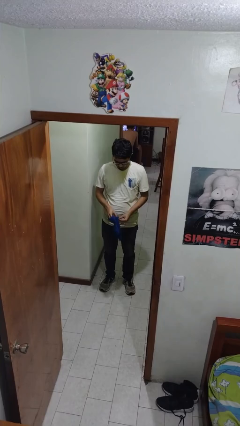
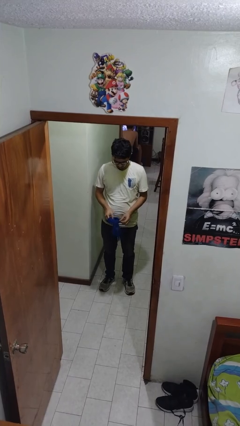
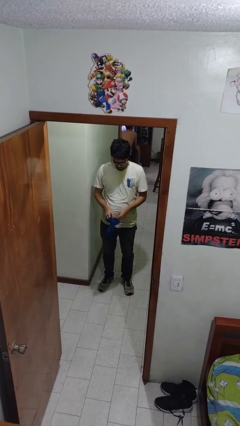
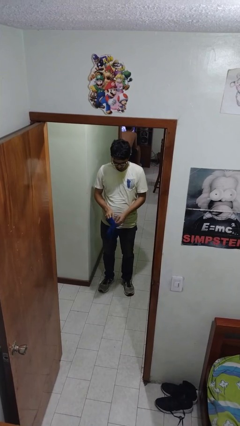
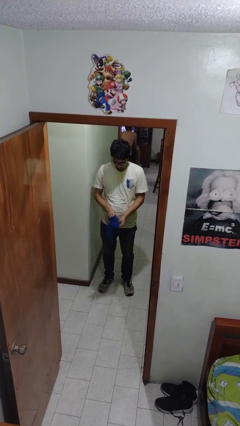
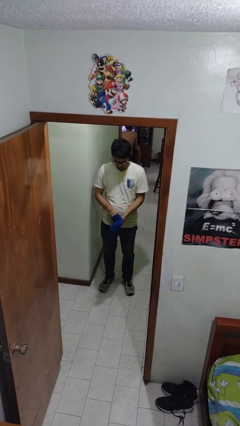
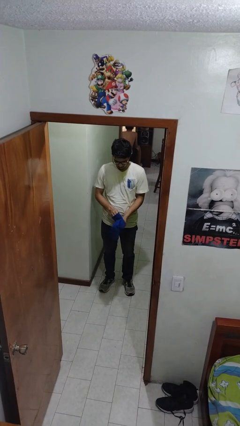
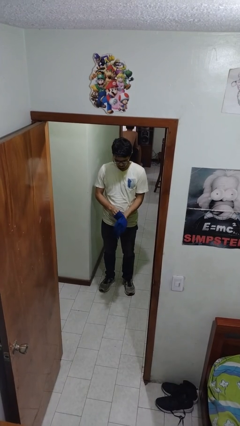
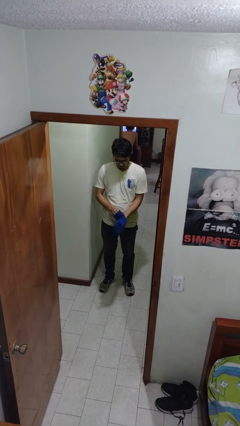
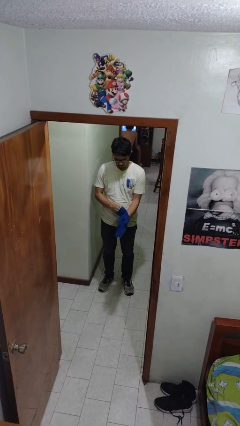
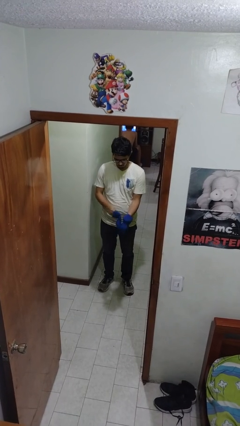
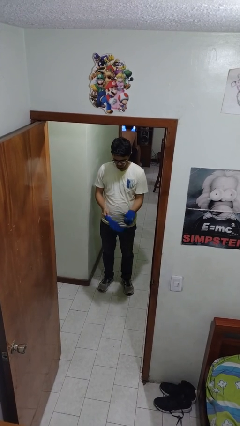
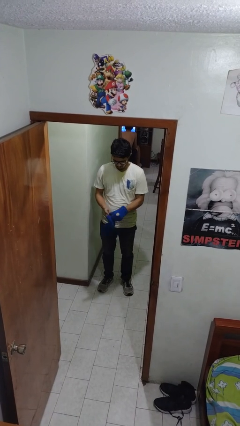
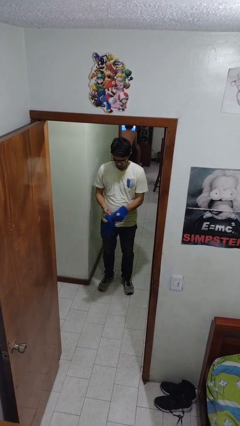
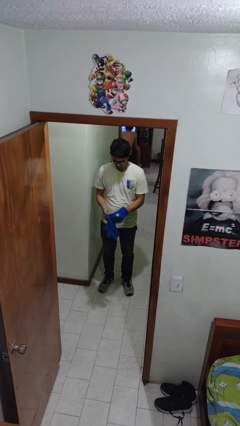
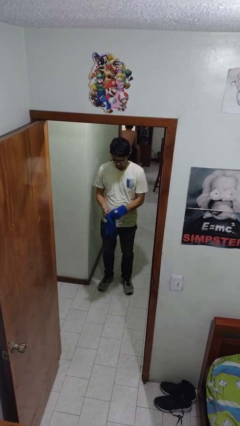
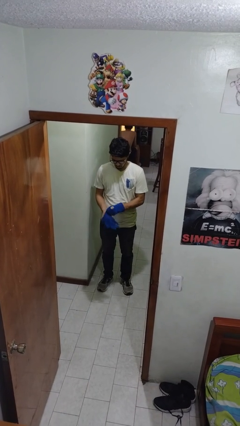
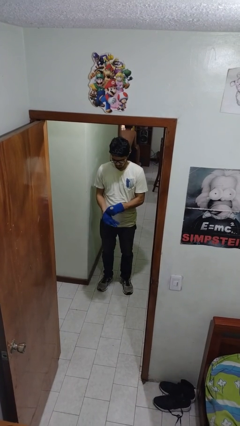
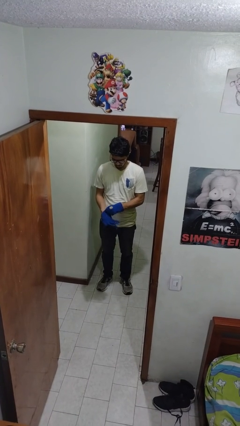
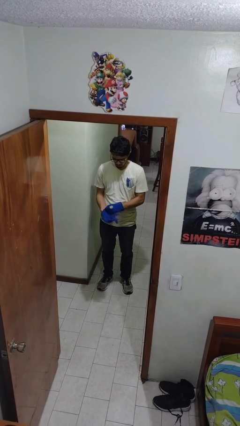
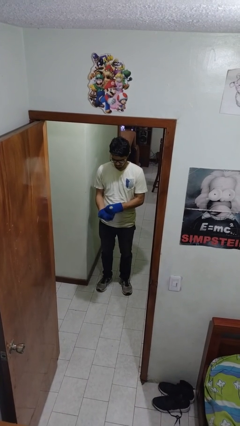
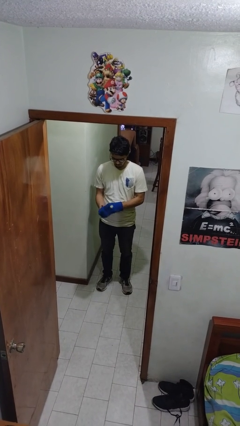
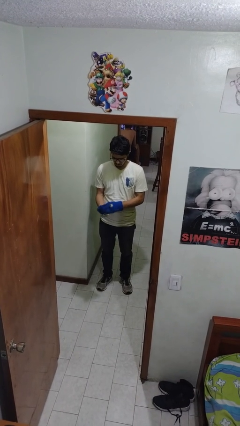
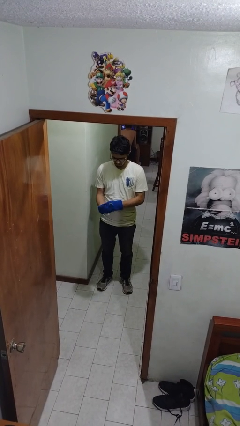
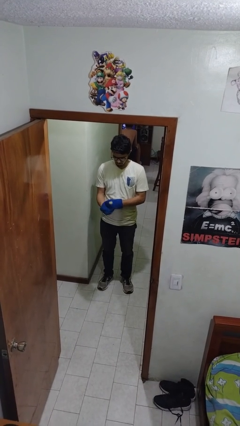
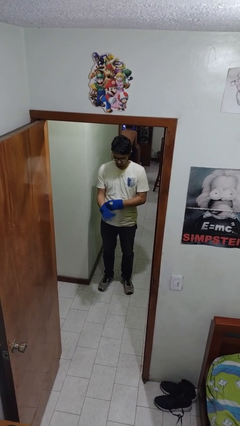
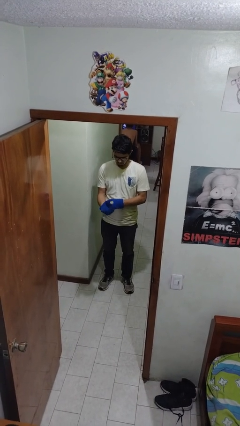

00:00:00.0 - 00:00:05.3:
person puts on gloves

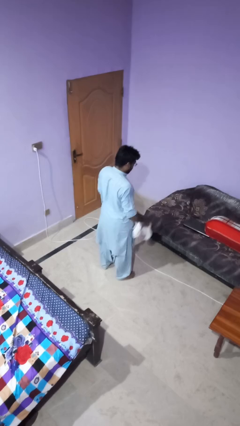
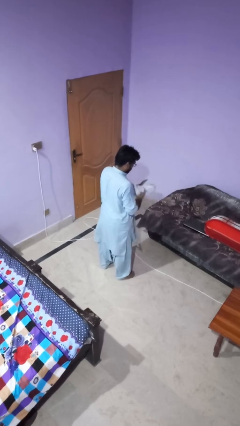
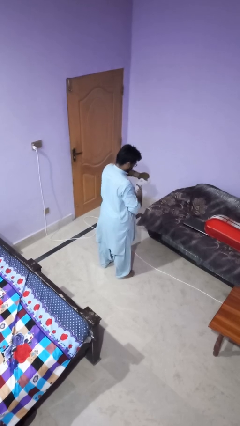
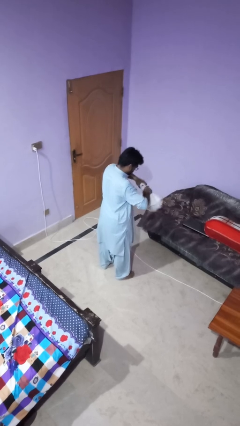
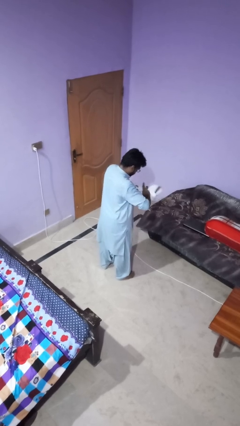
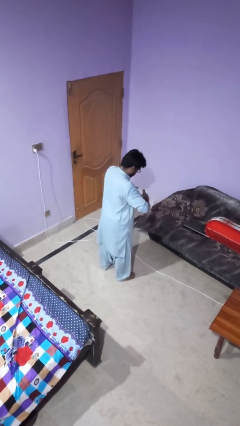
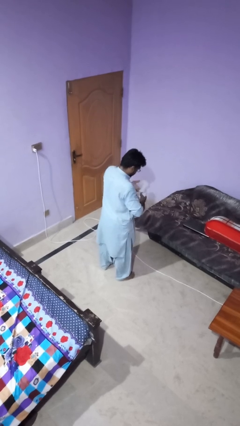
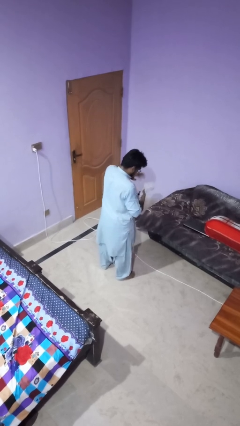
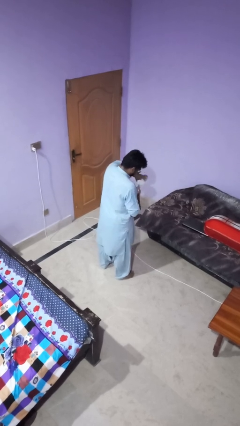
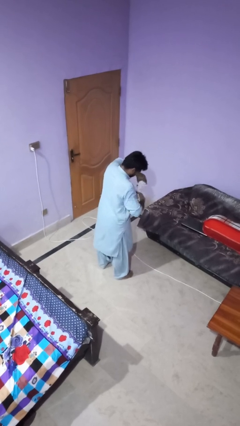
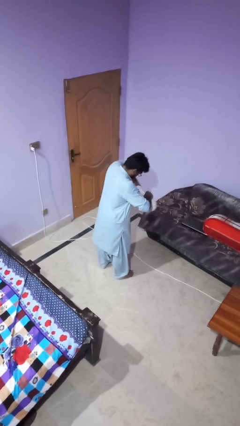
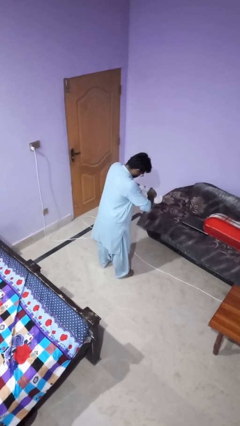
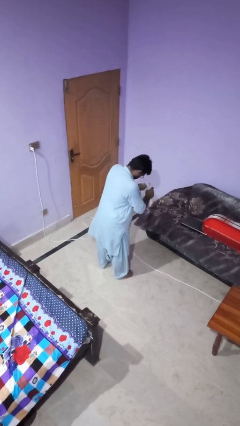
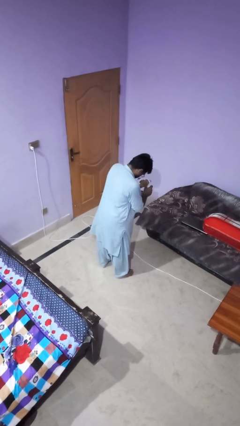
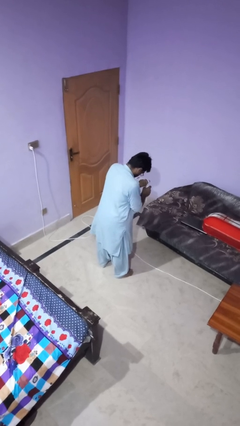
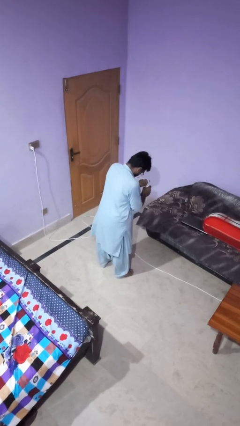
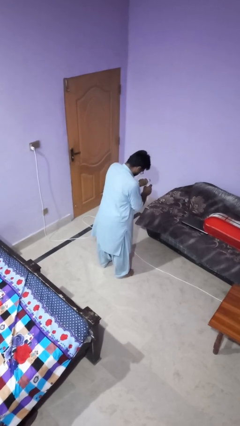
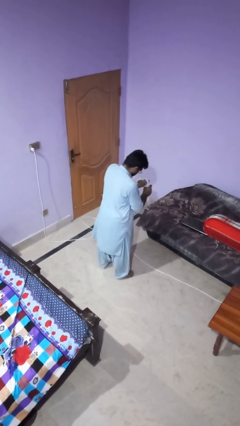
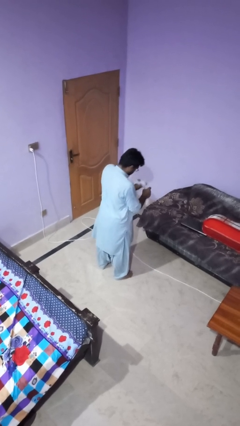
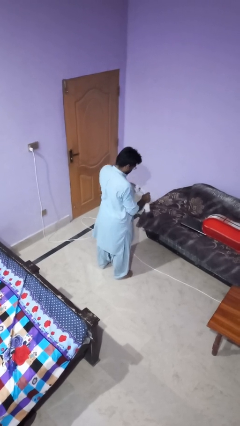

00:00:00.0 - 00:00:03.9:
person squeezes object

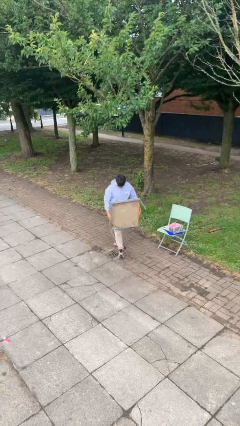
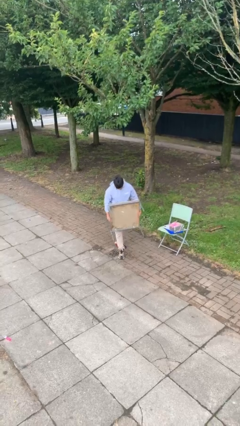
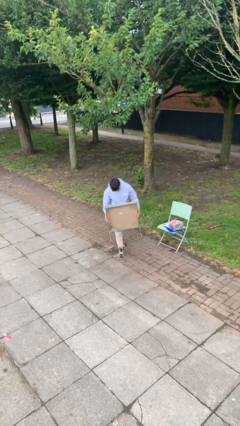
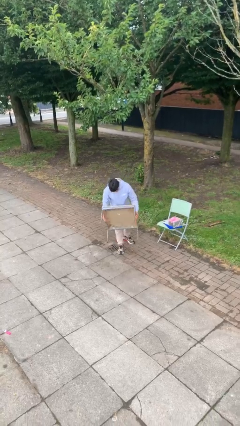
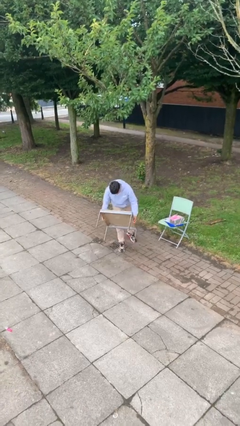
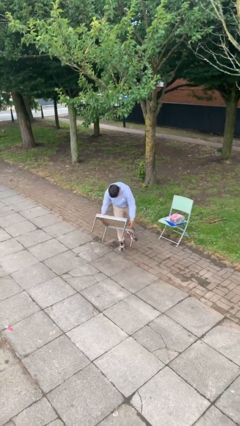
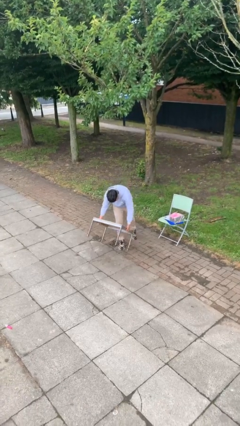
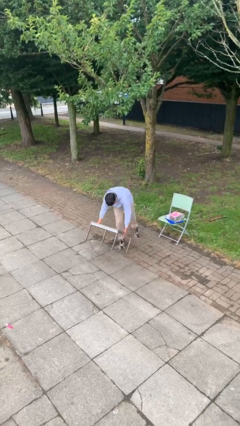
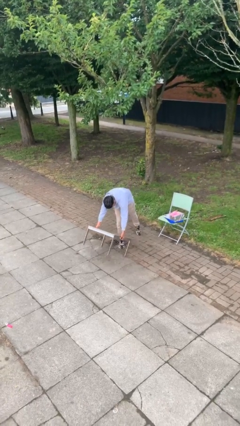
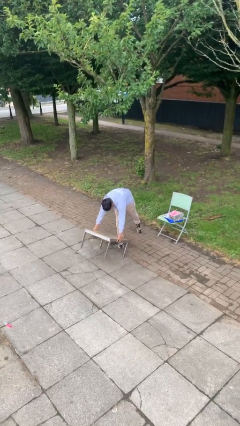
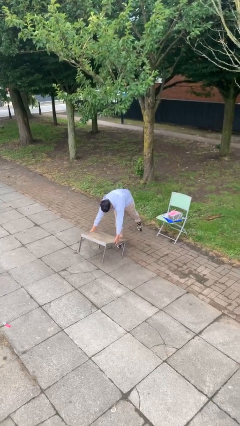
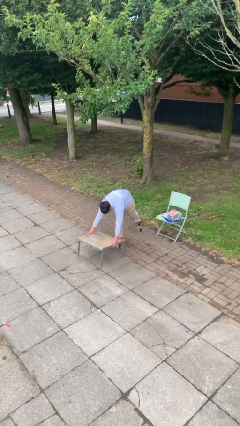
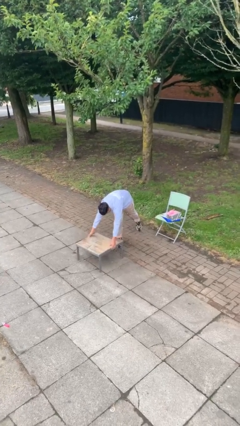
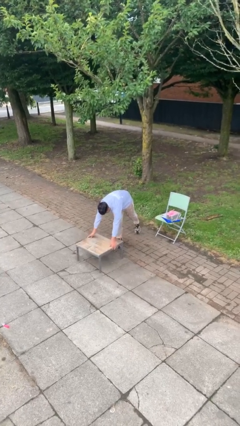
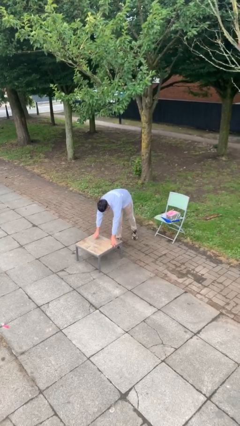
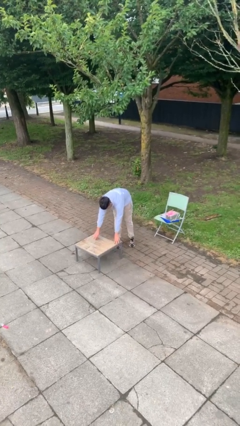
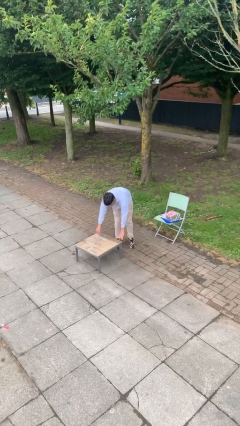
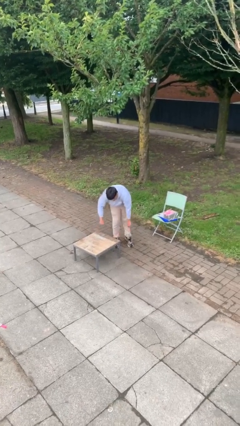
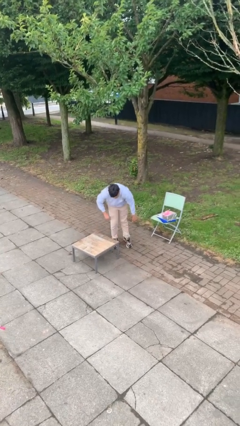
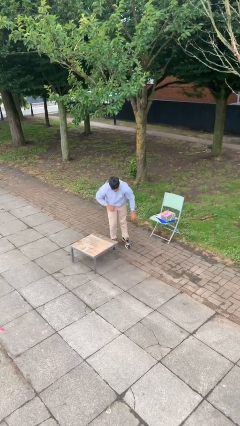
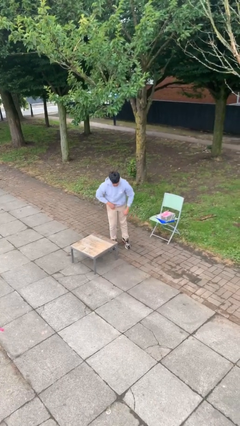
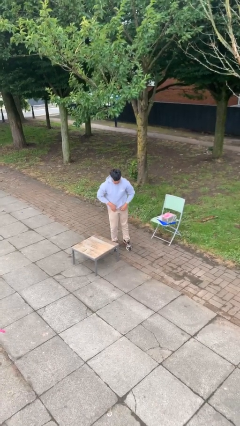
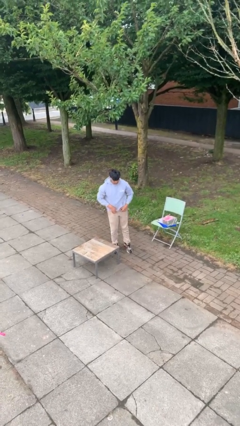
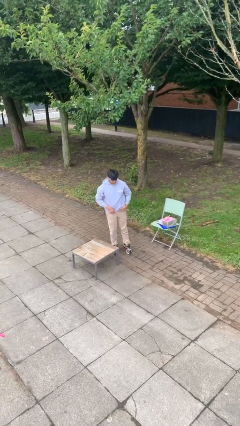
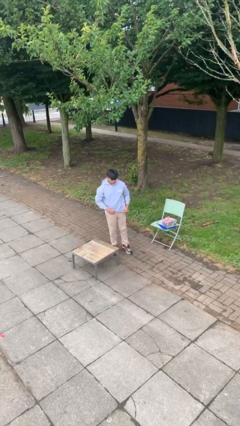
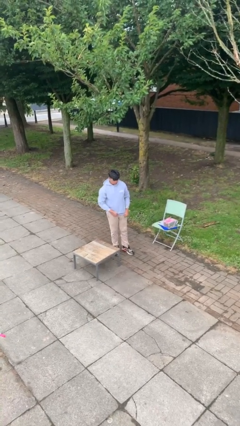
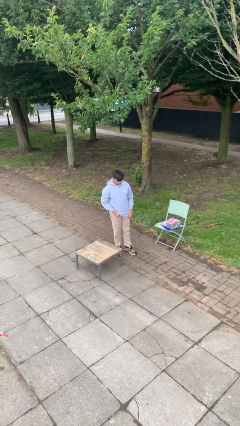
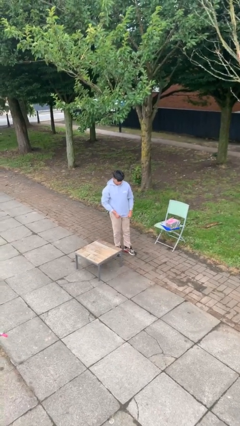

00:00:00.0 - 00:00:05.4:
person puts down object on floor

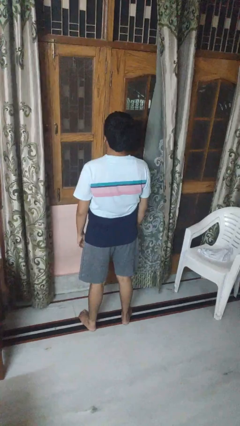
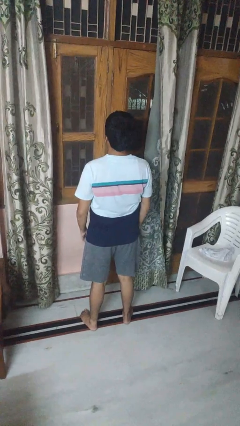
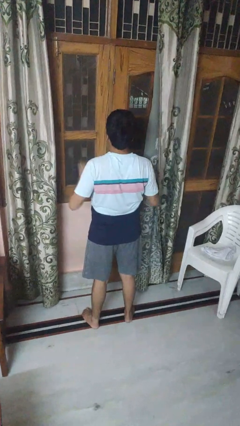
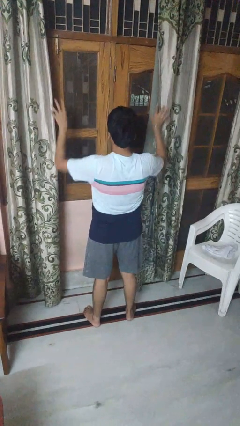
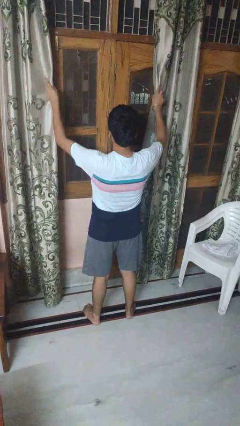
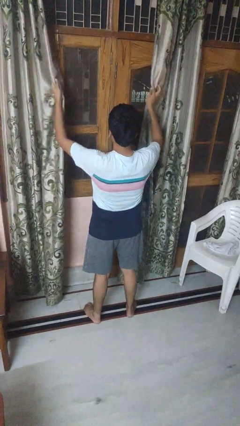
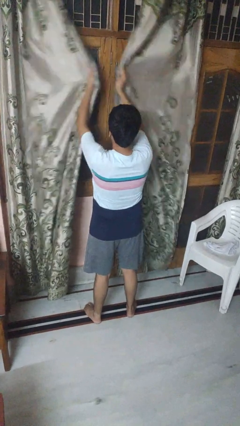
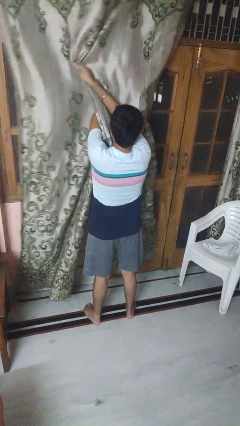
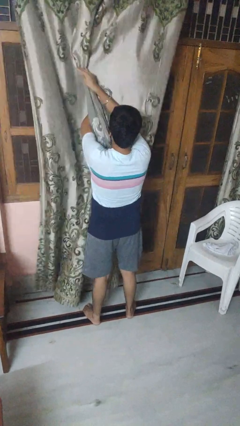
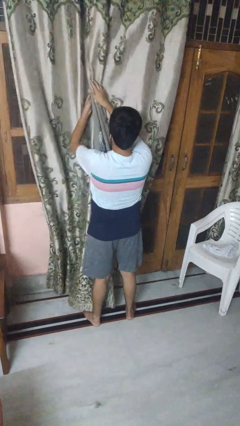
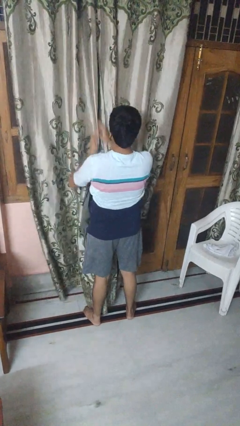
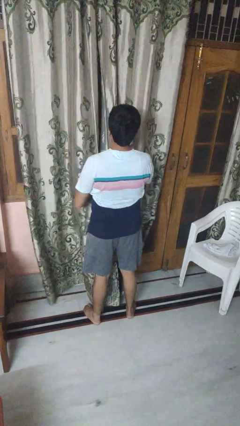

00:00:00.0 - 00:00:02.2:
person closes curtains

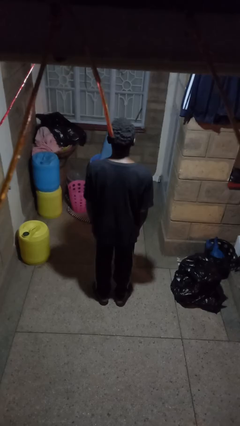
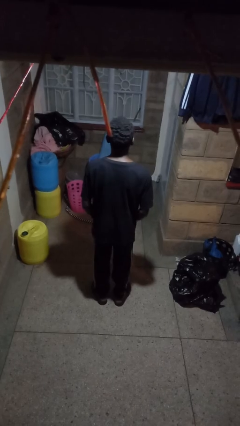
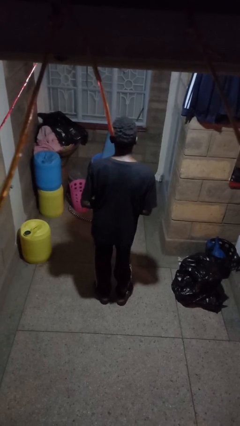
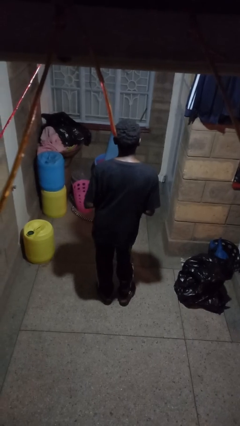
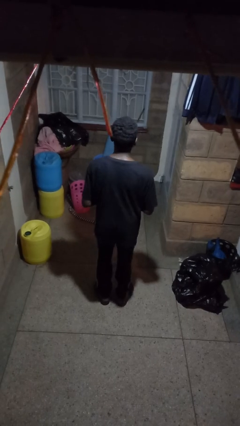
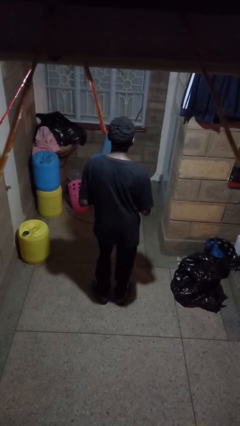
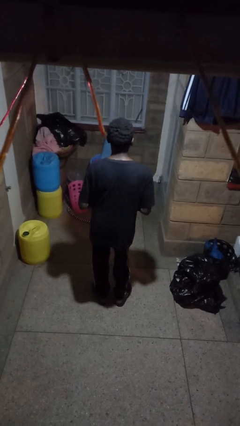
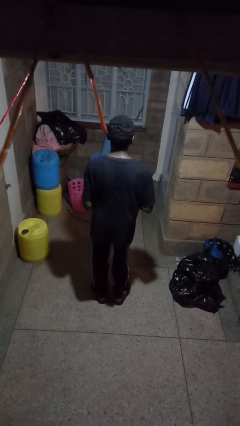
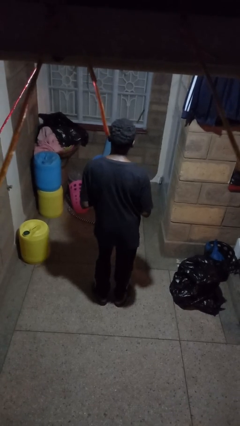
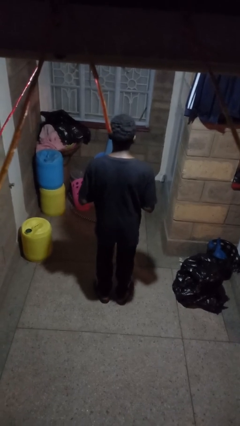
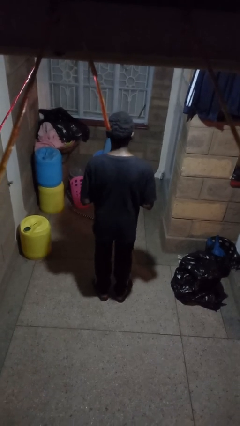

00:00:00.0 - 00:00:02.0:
person wiggles hips
